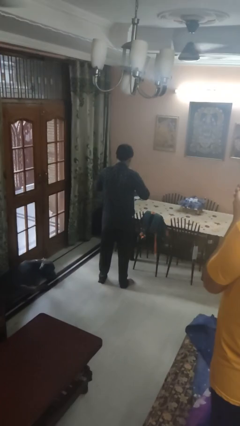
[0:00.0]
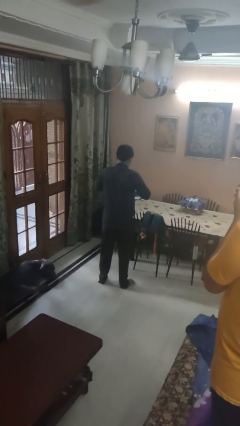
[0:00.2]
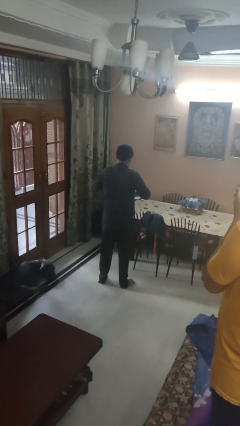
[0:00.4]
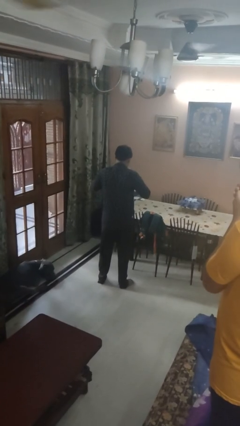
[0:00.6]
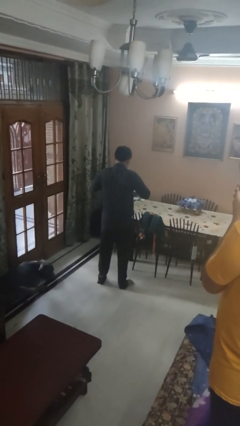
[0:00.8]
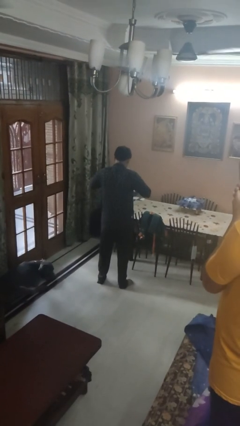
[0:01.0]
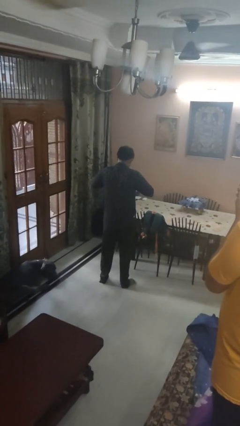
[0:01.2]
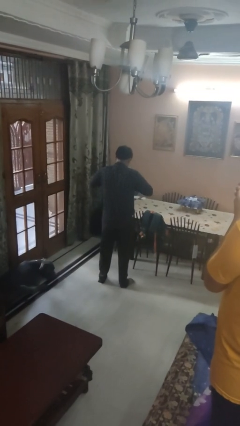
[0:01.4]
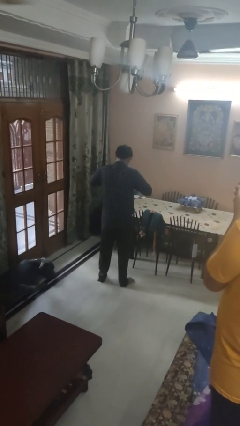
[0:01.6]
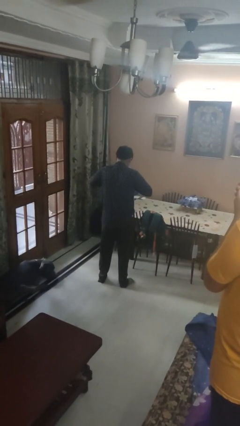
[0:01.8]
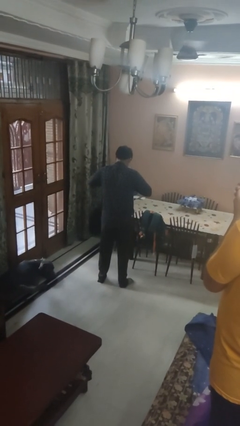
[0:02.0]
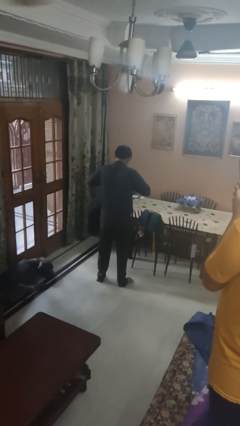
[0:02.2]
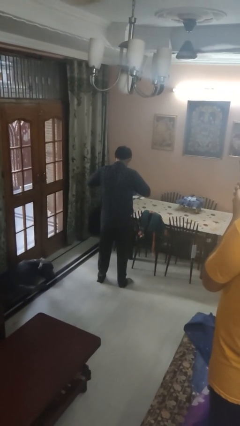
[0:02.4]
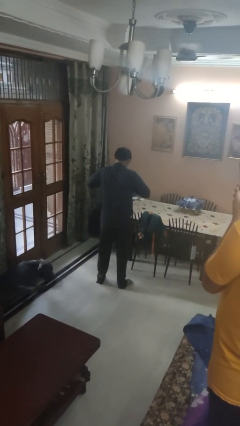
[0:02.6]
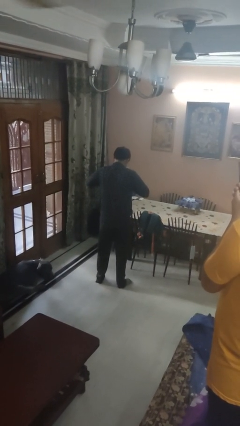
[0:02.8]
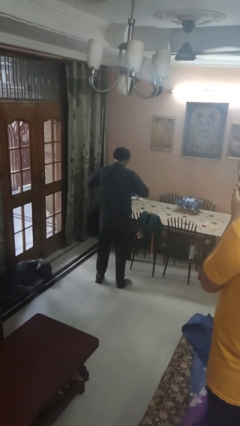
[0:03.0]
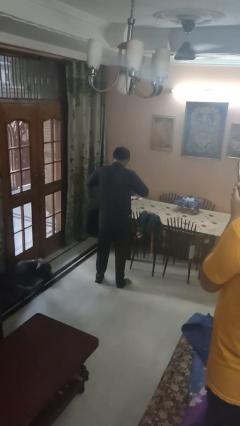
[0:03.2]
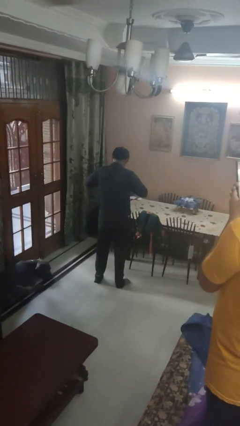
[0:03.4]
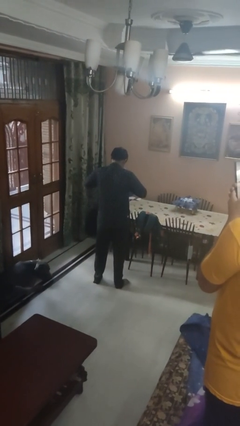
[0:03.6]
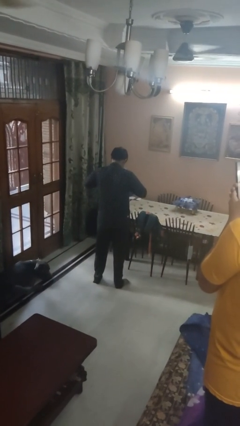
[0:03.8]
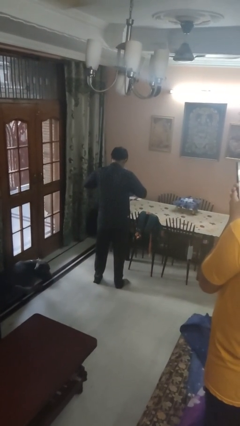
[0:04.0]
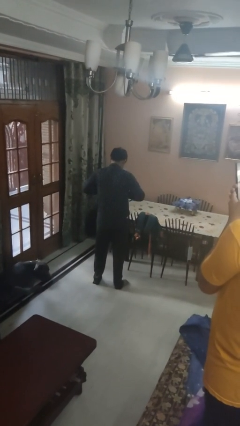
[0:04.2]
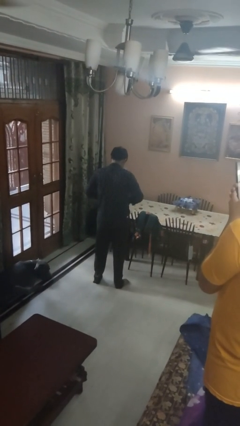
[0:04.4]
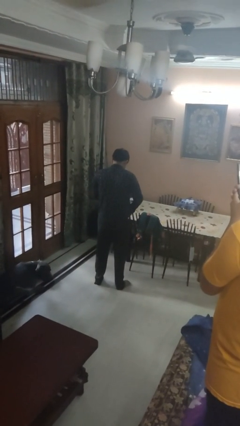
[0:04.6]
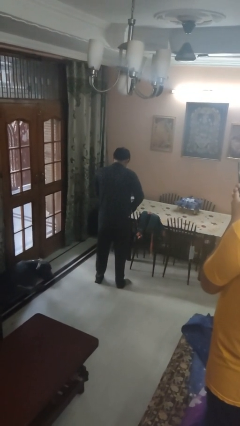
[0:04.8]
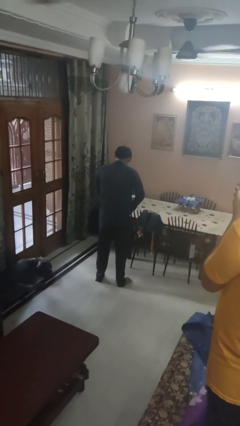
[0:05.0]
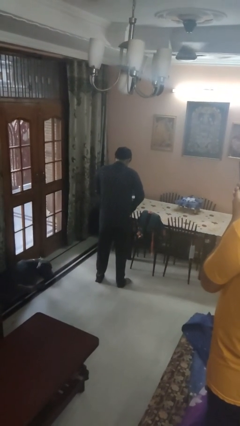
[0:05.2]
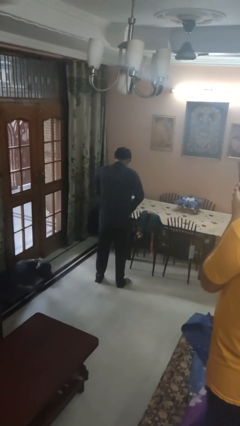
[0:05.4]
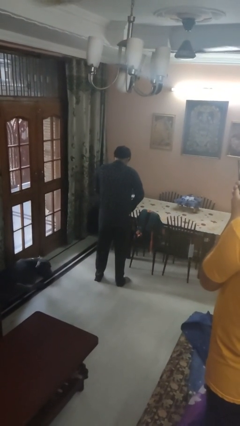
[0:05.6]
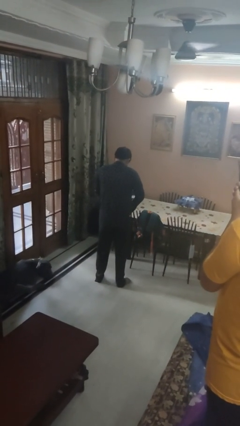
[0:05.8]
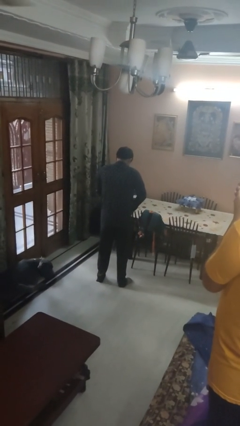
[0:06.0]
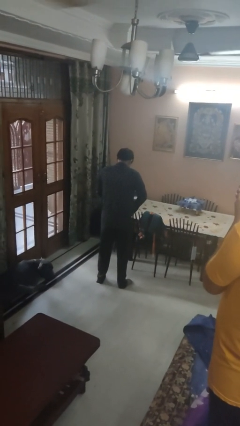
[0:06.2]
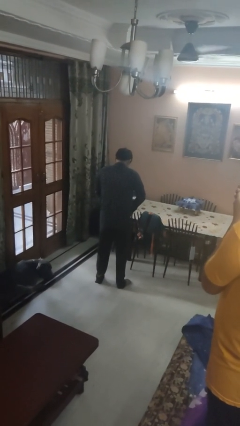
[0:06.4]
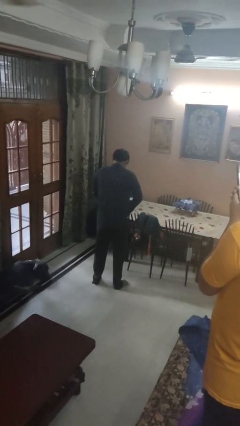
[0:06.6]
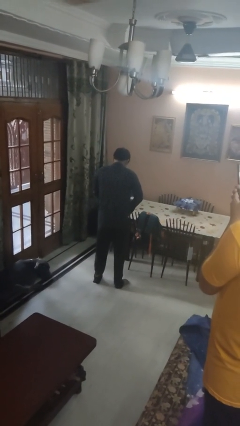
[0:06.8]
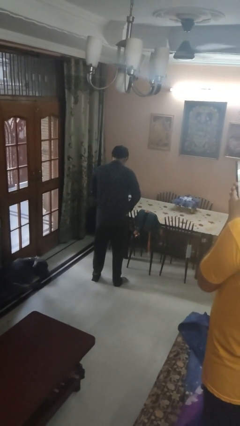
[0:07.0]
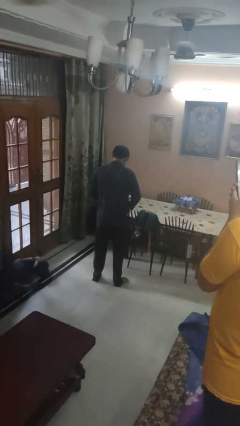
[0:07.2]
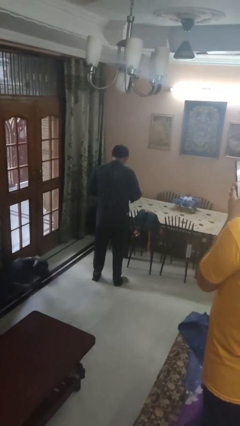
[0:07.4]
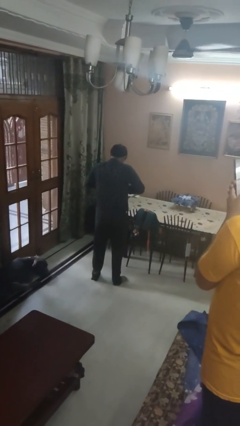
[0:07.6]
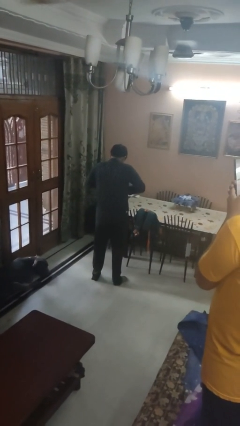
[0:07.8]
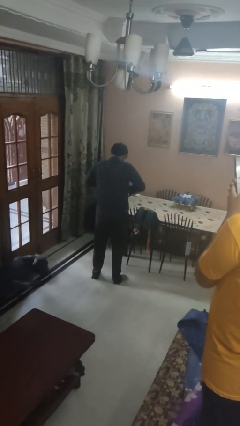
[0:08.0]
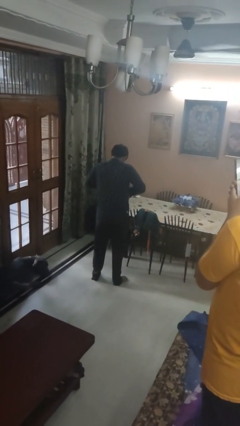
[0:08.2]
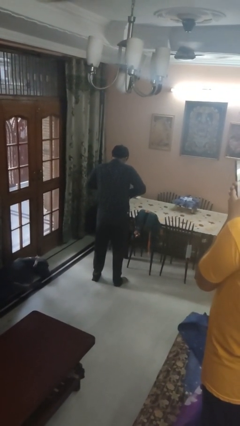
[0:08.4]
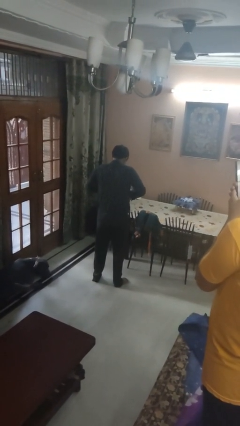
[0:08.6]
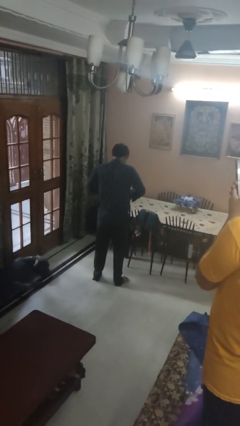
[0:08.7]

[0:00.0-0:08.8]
person unbuttons shirt

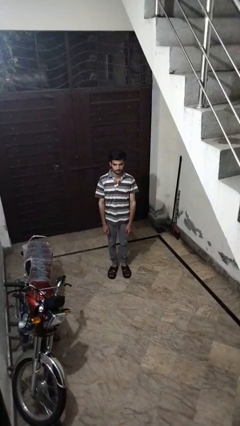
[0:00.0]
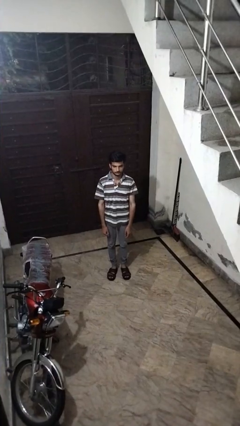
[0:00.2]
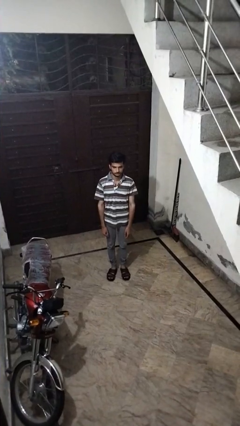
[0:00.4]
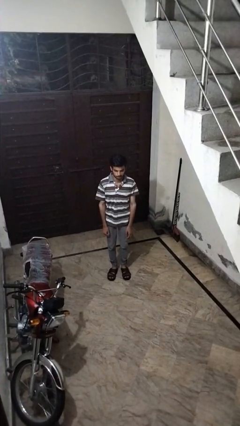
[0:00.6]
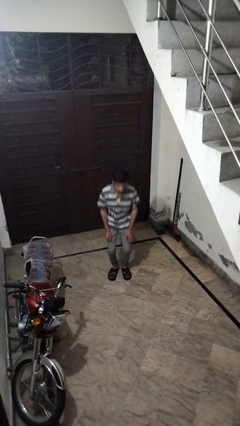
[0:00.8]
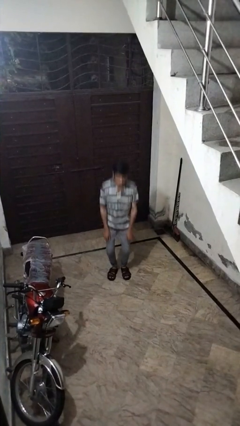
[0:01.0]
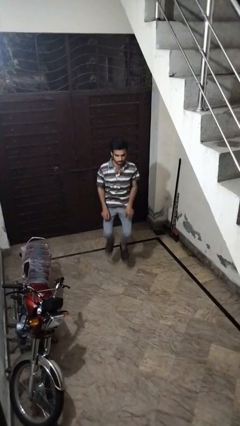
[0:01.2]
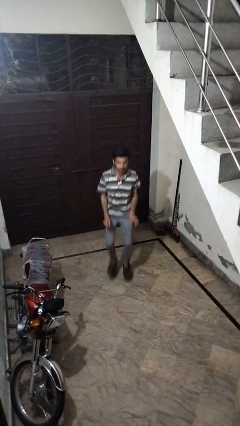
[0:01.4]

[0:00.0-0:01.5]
person jumps

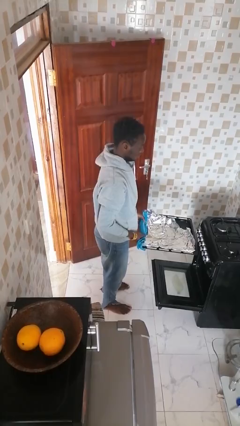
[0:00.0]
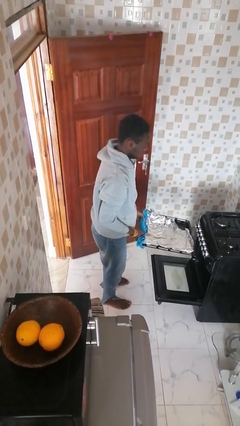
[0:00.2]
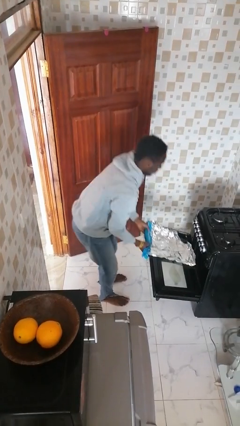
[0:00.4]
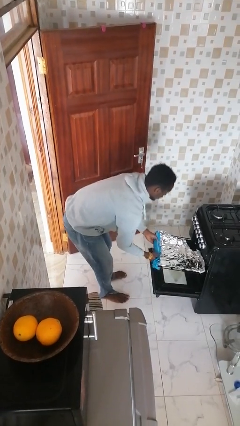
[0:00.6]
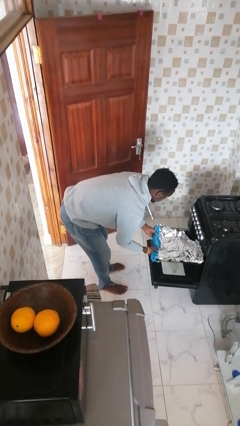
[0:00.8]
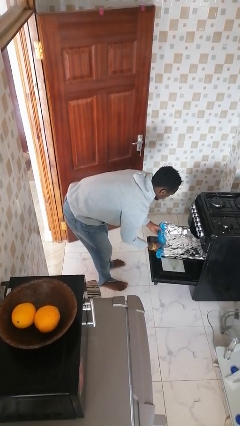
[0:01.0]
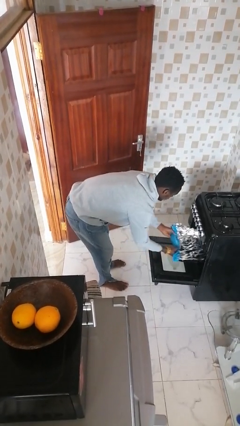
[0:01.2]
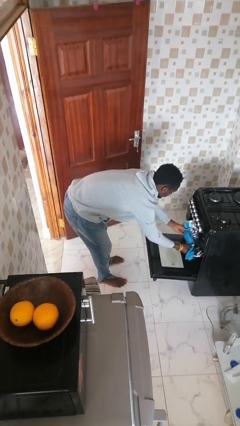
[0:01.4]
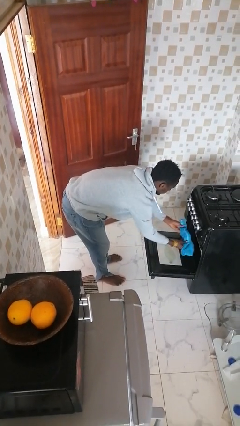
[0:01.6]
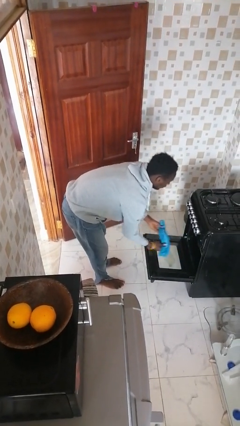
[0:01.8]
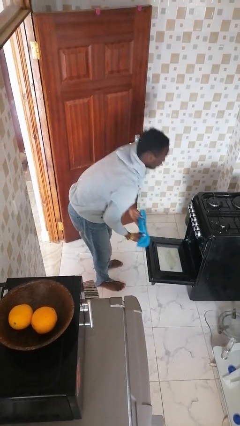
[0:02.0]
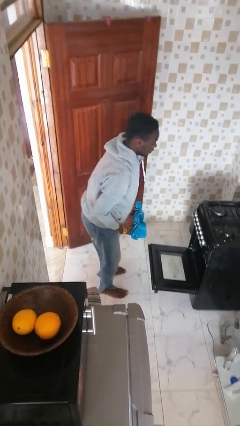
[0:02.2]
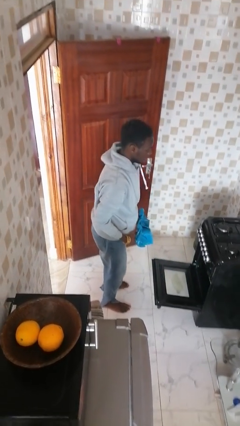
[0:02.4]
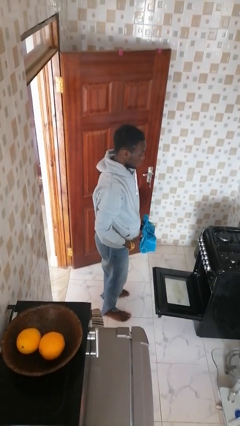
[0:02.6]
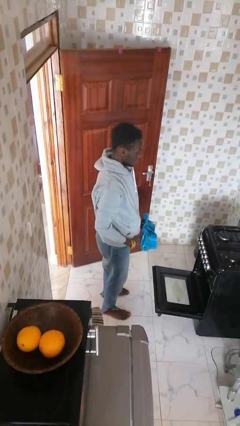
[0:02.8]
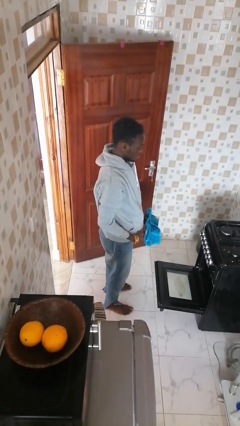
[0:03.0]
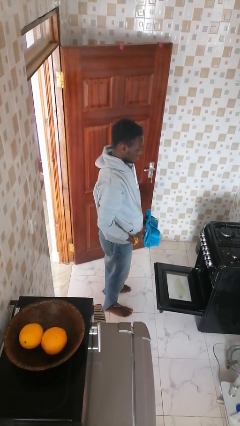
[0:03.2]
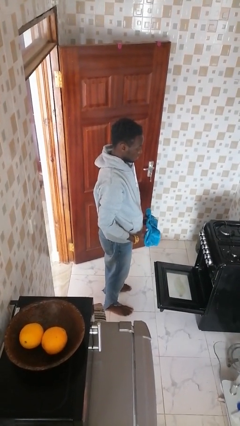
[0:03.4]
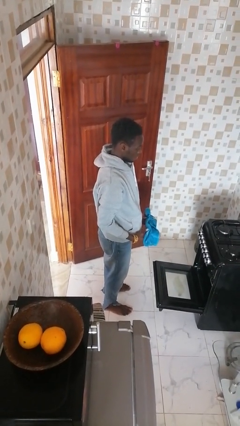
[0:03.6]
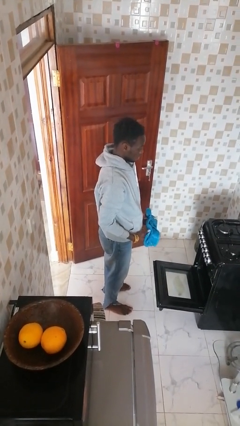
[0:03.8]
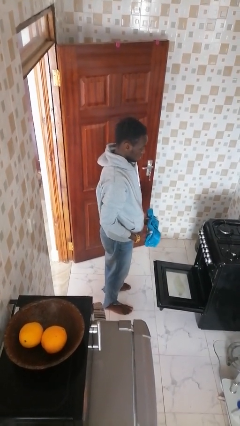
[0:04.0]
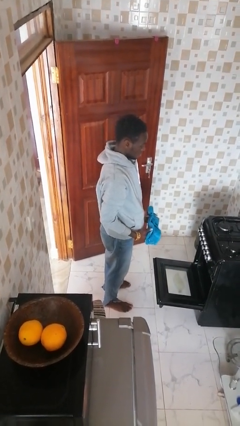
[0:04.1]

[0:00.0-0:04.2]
person puts object into oven

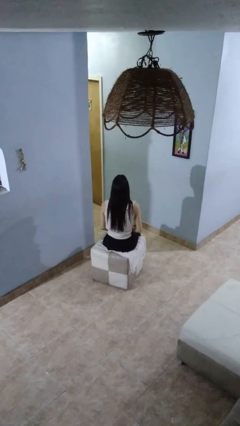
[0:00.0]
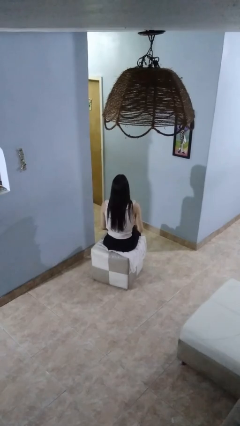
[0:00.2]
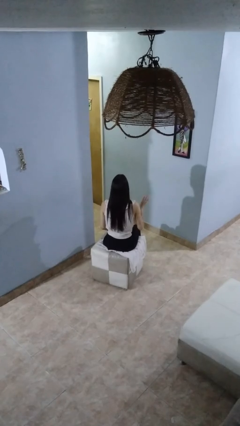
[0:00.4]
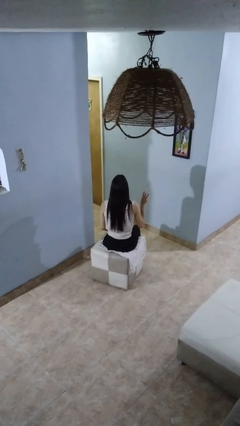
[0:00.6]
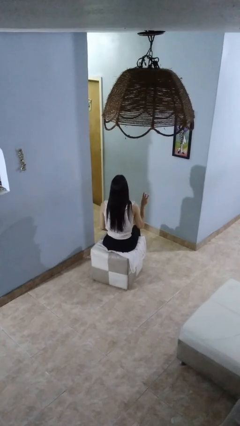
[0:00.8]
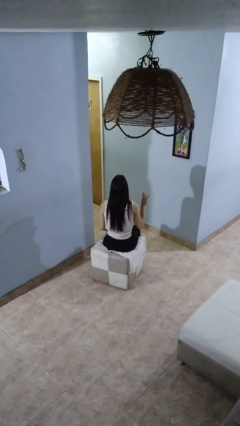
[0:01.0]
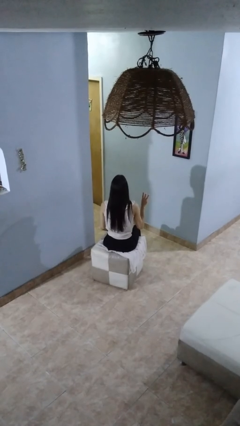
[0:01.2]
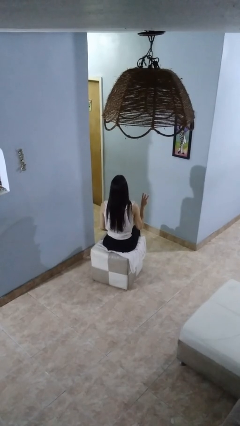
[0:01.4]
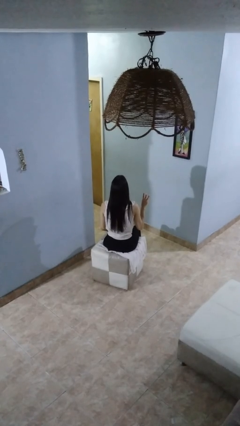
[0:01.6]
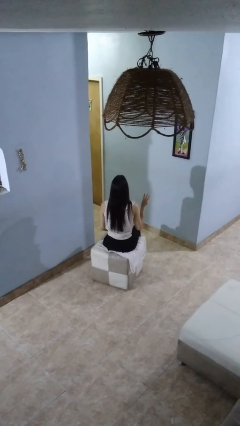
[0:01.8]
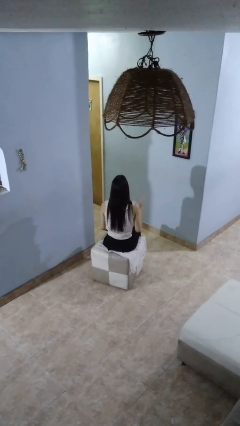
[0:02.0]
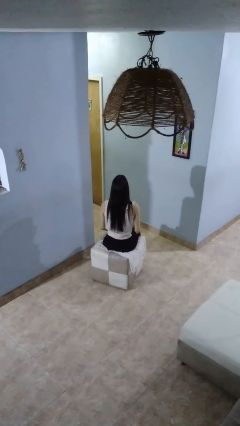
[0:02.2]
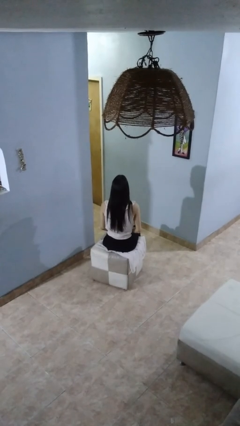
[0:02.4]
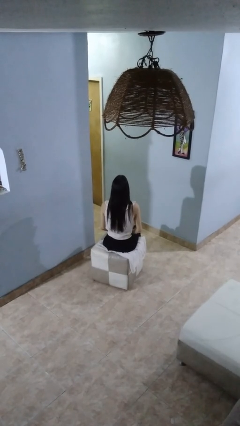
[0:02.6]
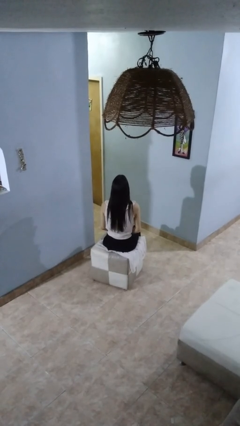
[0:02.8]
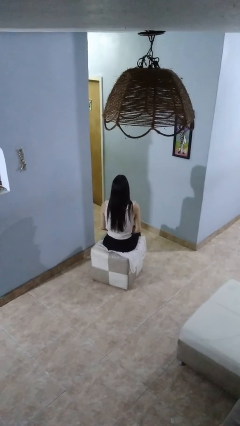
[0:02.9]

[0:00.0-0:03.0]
person gestures number three

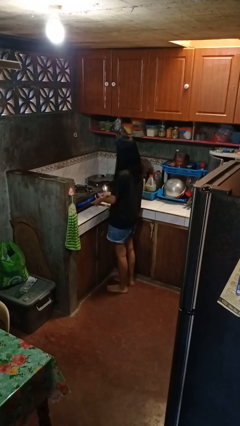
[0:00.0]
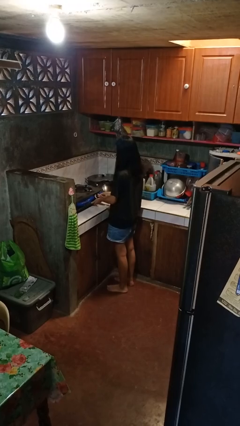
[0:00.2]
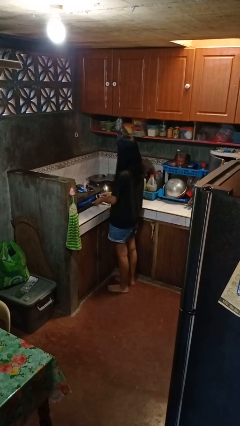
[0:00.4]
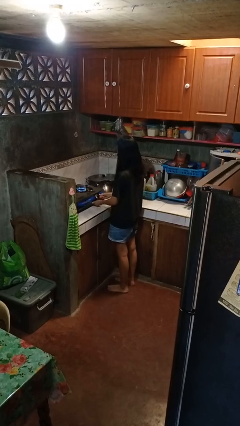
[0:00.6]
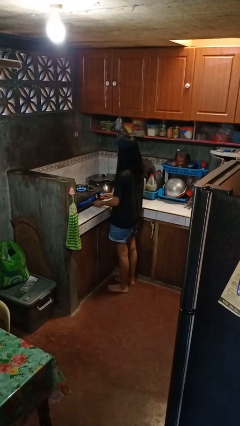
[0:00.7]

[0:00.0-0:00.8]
person turns on stovetop
